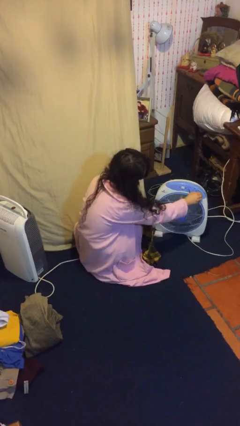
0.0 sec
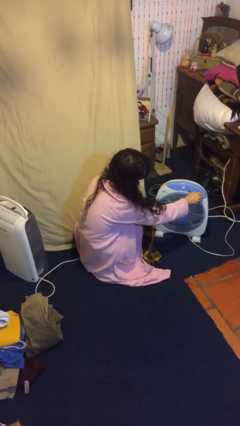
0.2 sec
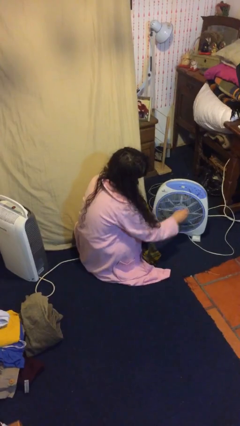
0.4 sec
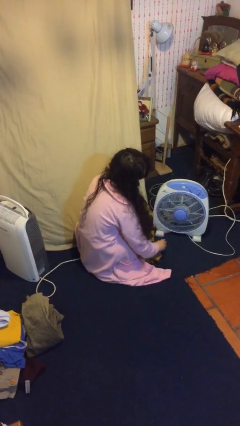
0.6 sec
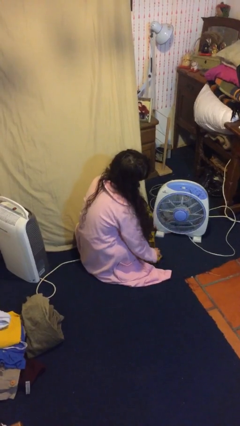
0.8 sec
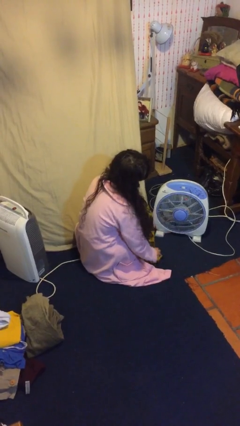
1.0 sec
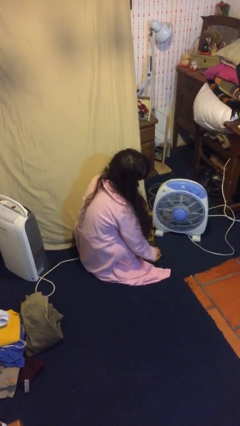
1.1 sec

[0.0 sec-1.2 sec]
person turns off fan

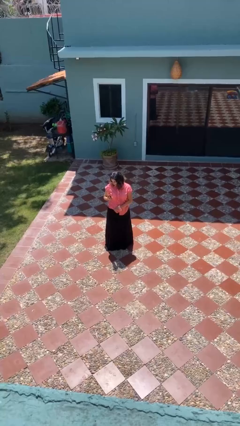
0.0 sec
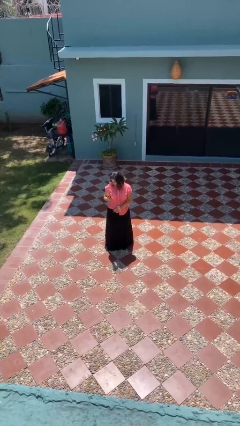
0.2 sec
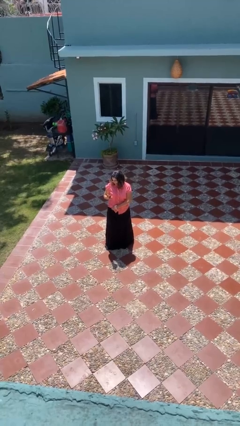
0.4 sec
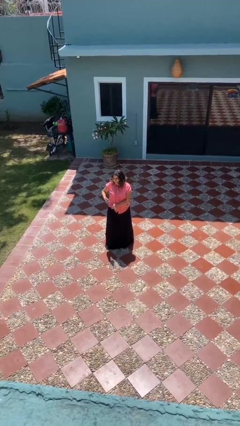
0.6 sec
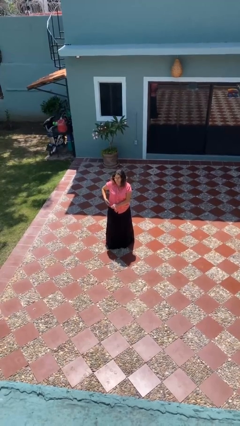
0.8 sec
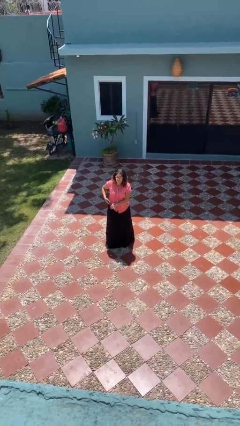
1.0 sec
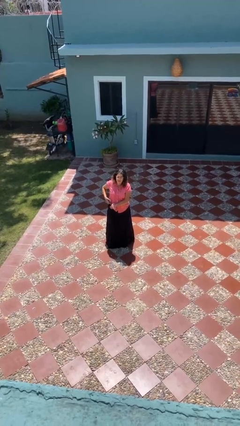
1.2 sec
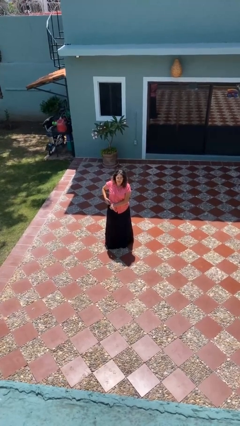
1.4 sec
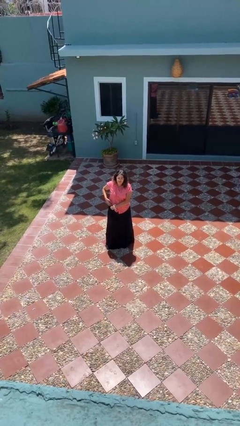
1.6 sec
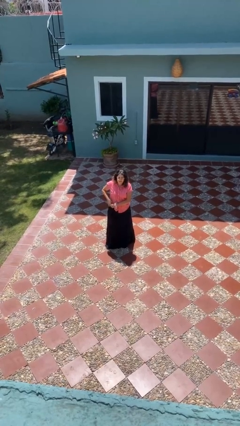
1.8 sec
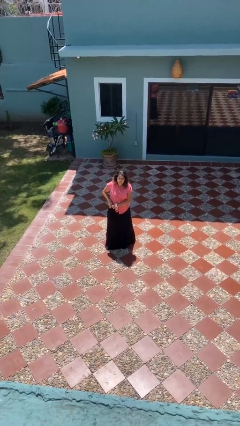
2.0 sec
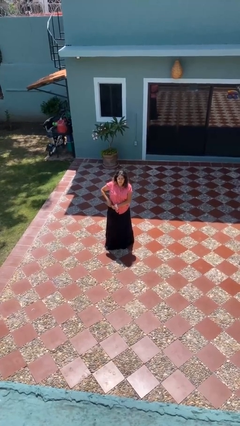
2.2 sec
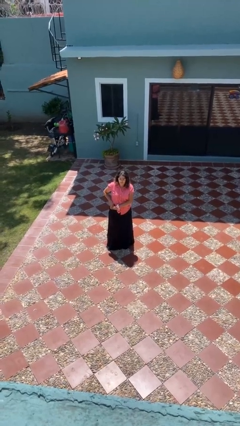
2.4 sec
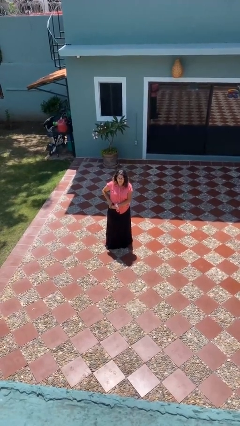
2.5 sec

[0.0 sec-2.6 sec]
person puts phone into pocket

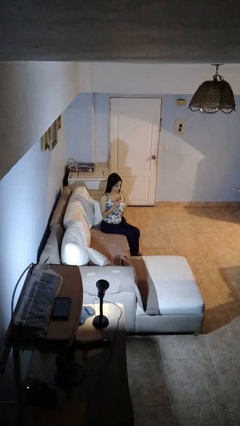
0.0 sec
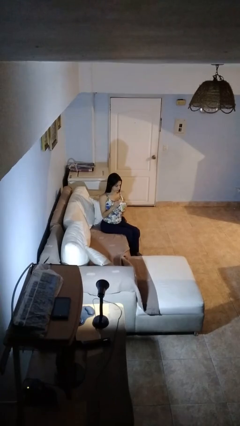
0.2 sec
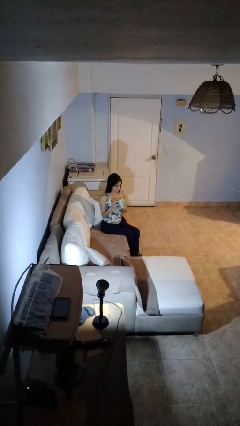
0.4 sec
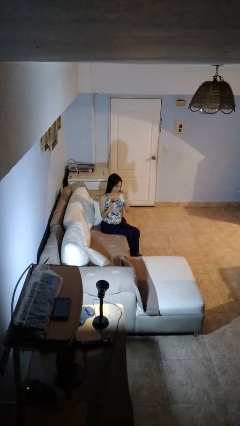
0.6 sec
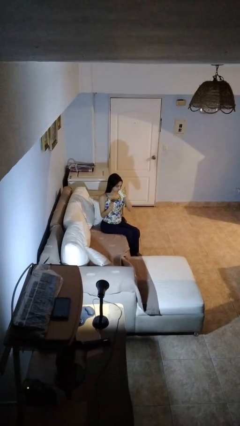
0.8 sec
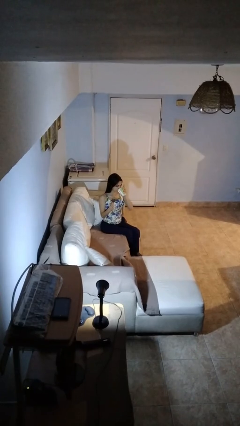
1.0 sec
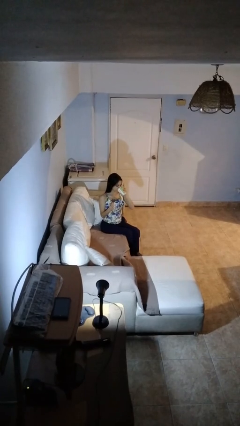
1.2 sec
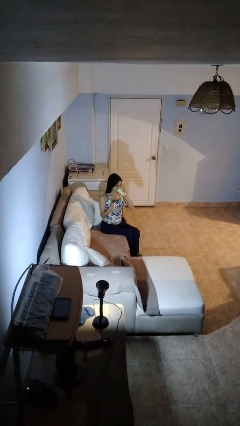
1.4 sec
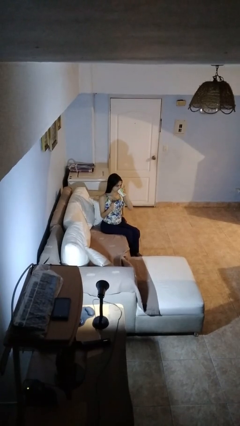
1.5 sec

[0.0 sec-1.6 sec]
person drinks from mug

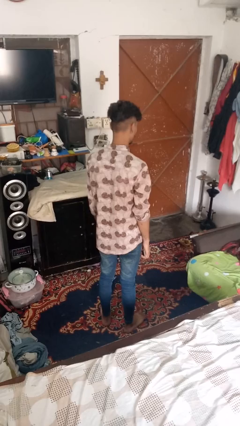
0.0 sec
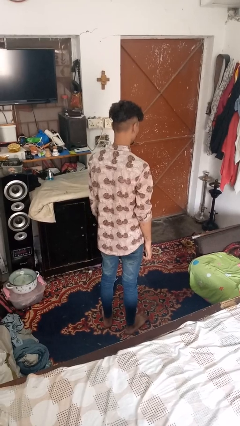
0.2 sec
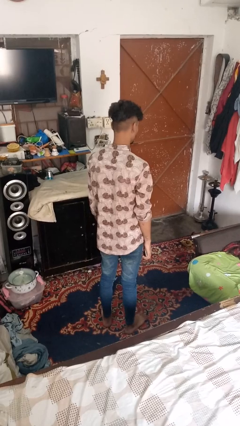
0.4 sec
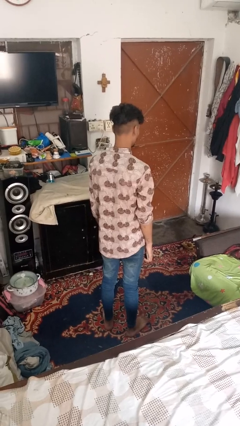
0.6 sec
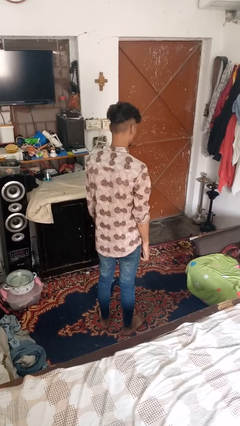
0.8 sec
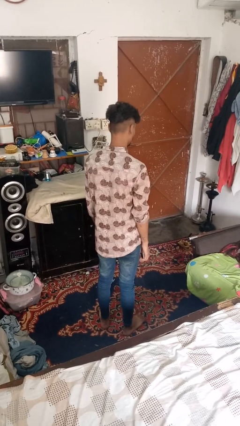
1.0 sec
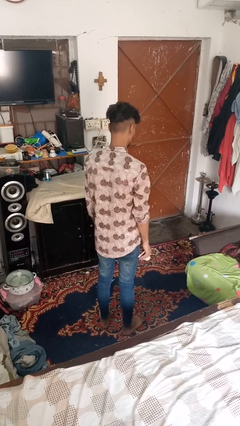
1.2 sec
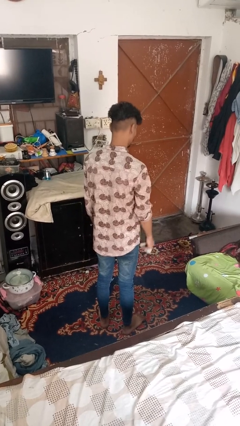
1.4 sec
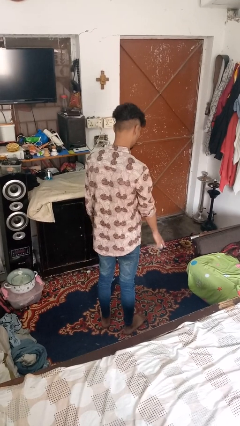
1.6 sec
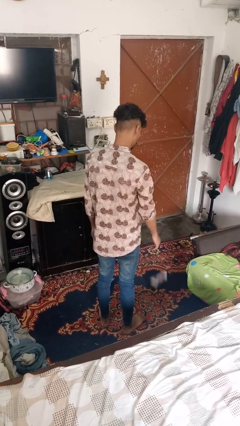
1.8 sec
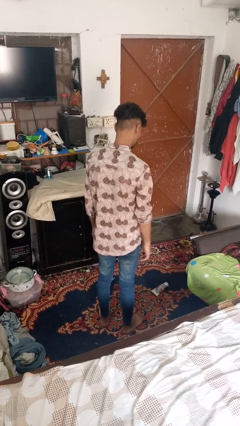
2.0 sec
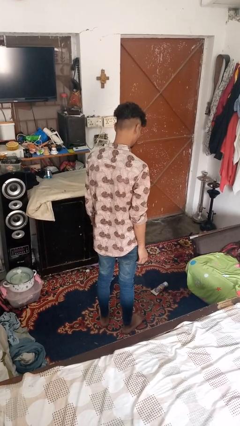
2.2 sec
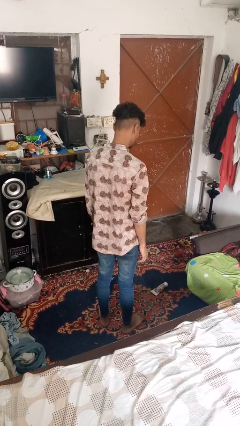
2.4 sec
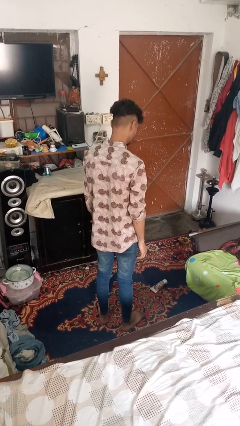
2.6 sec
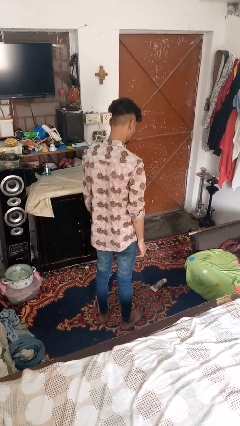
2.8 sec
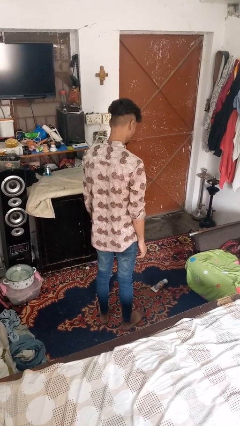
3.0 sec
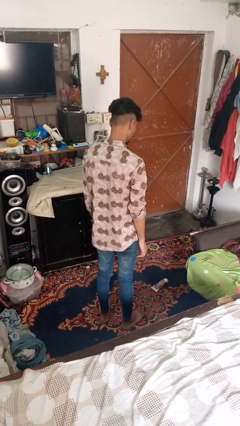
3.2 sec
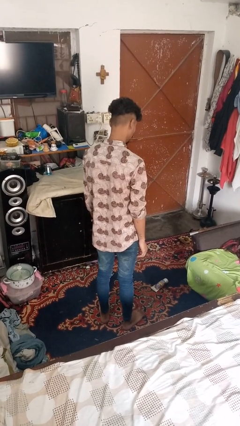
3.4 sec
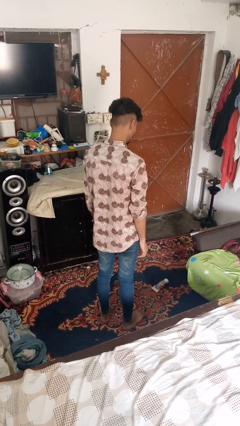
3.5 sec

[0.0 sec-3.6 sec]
person throws object to ground

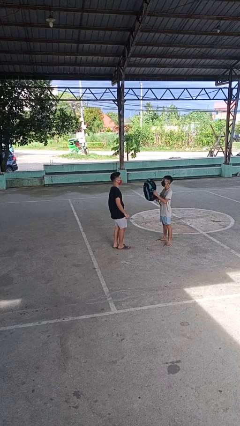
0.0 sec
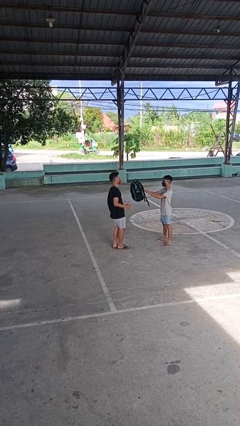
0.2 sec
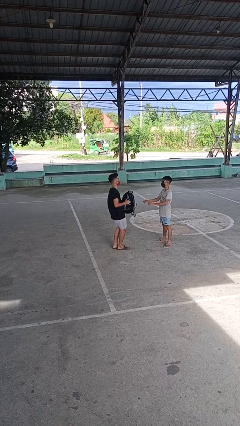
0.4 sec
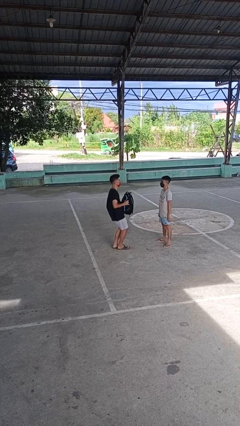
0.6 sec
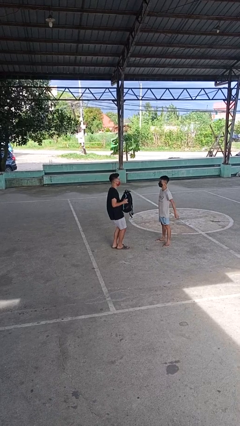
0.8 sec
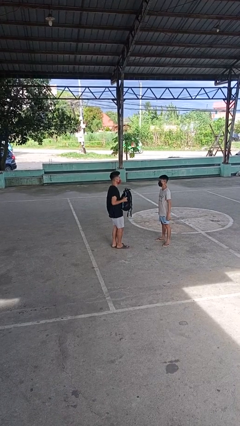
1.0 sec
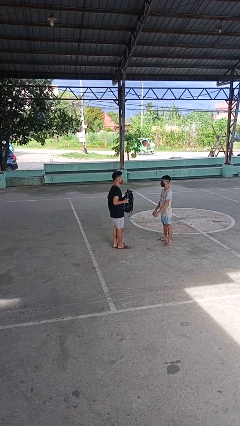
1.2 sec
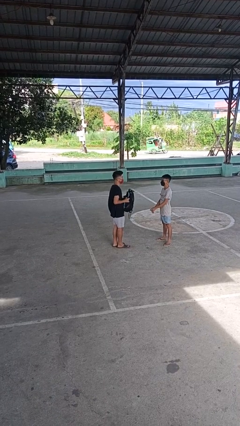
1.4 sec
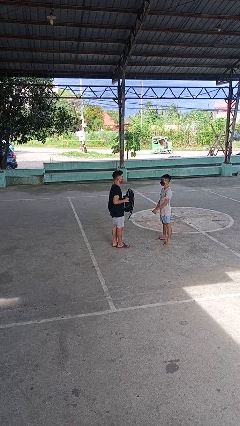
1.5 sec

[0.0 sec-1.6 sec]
person catches object from person

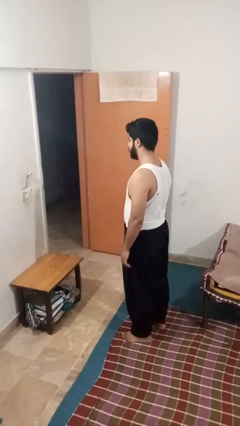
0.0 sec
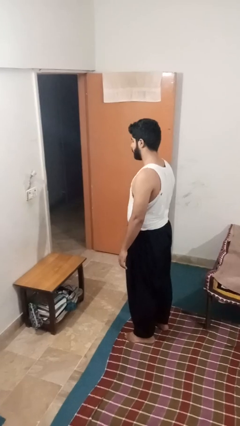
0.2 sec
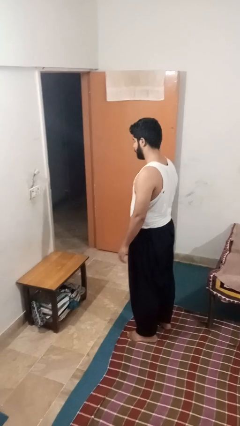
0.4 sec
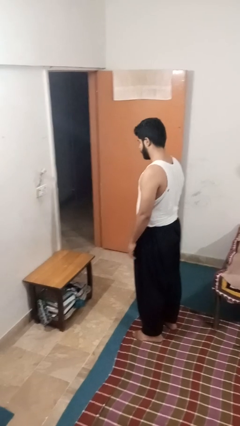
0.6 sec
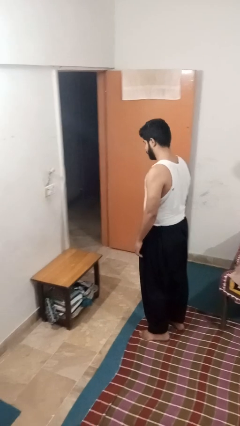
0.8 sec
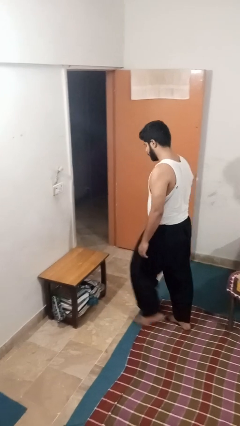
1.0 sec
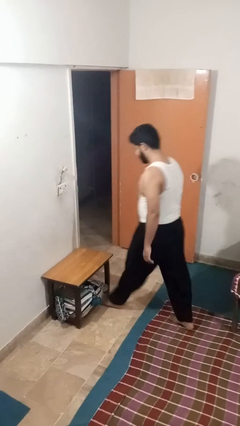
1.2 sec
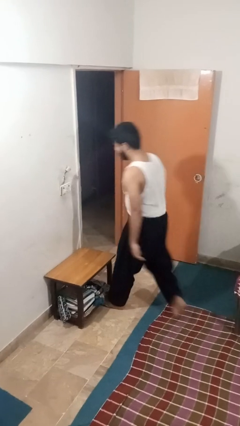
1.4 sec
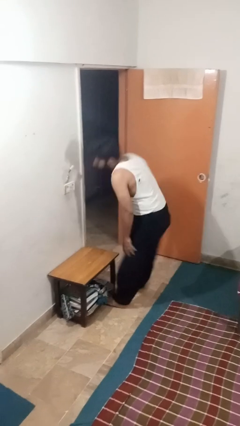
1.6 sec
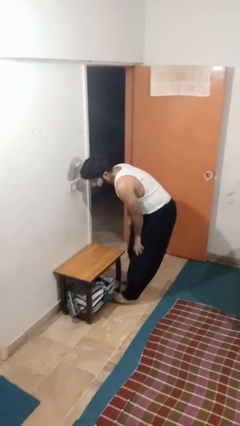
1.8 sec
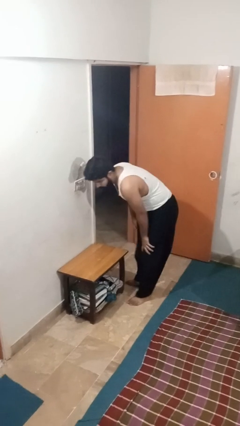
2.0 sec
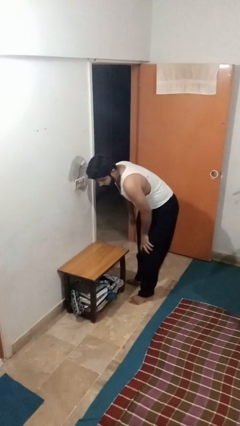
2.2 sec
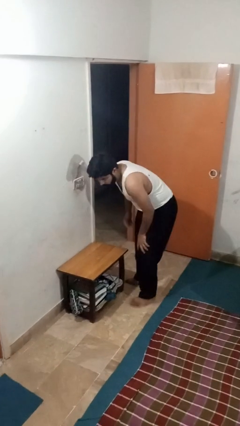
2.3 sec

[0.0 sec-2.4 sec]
person bumps into table

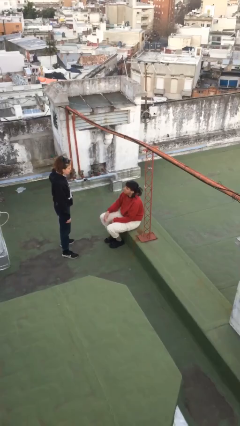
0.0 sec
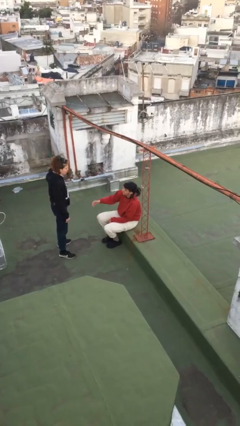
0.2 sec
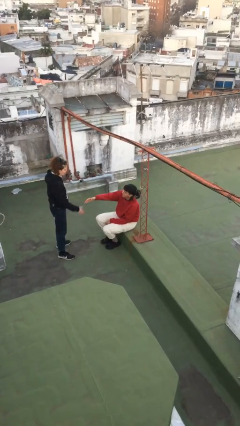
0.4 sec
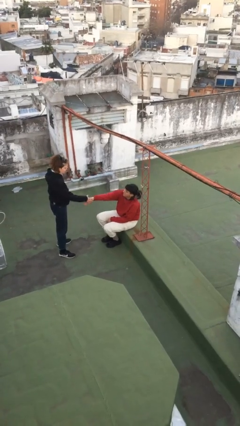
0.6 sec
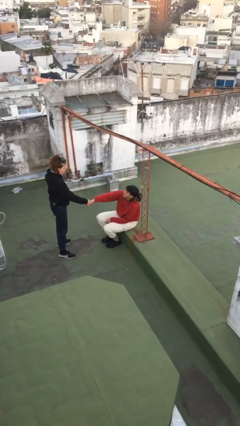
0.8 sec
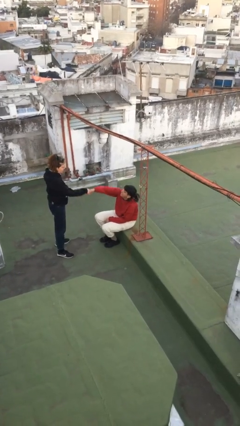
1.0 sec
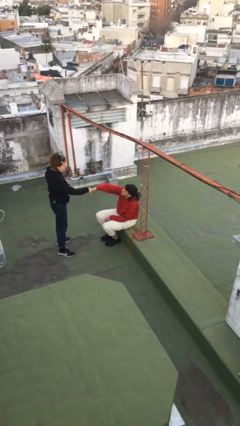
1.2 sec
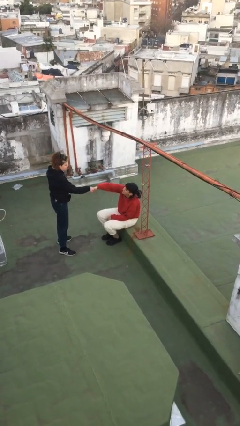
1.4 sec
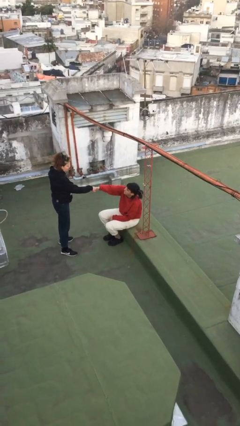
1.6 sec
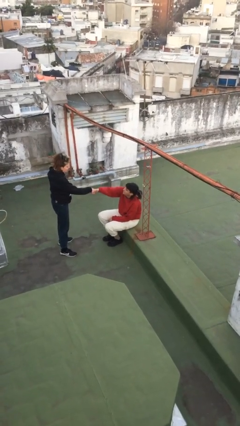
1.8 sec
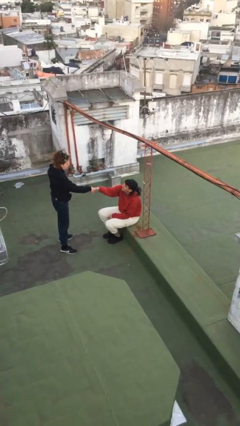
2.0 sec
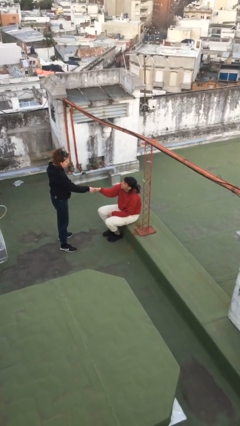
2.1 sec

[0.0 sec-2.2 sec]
person shakes hand

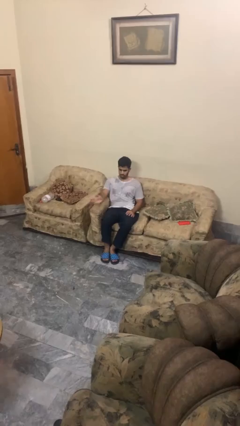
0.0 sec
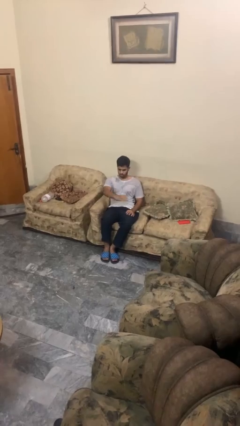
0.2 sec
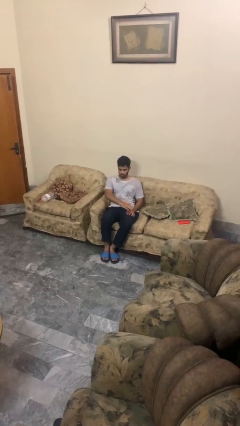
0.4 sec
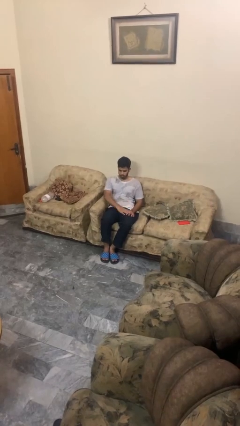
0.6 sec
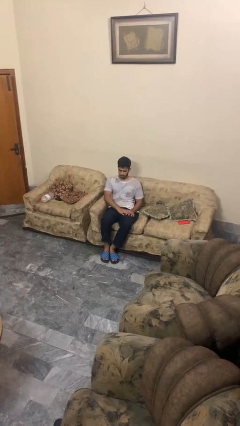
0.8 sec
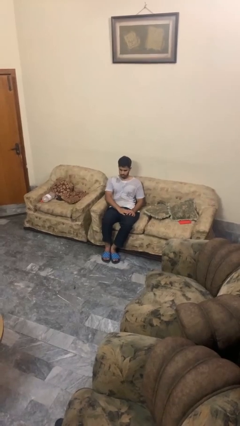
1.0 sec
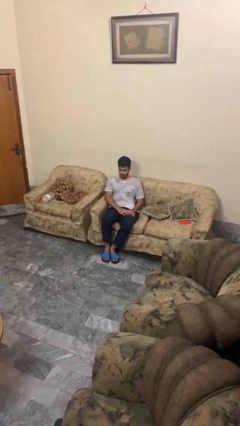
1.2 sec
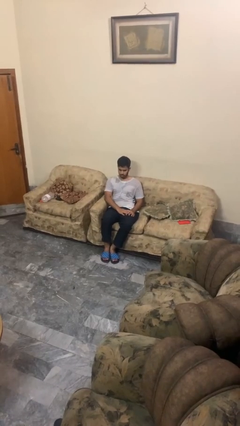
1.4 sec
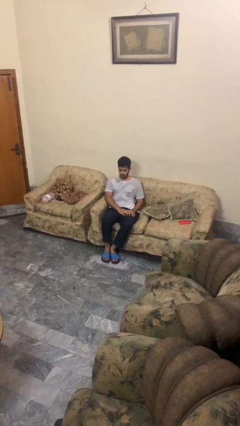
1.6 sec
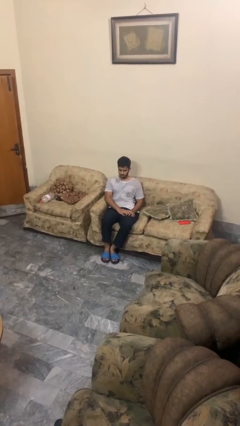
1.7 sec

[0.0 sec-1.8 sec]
person gestures swipe left
